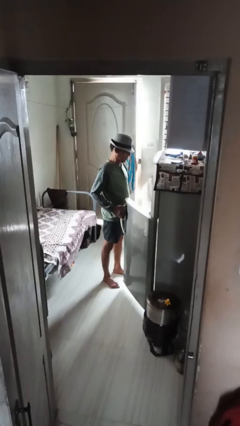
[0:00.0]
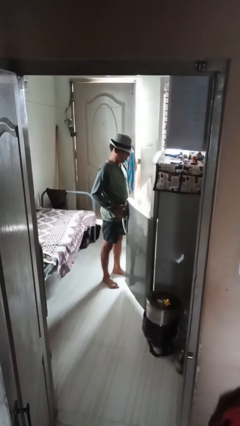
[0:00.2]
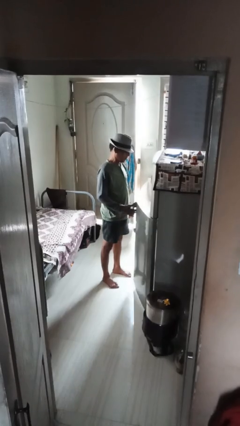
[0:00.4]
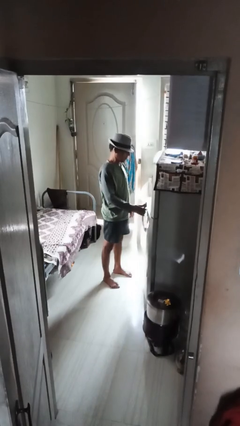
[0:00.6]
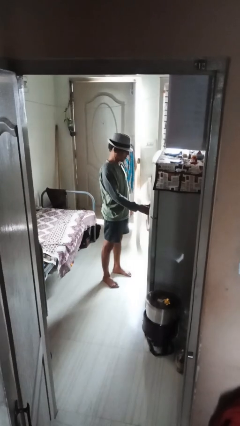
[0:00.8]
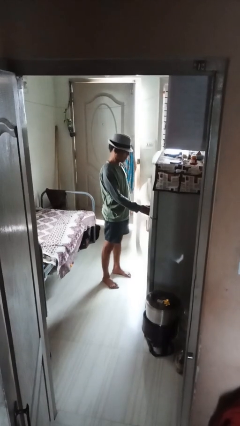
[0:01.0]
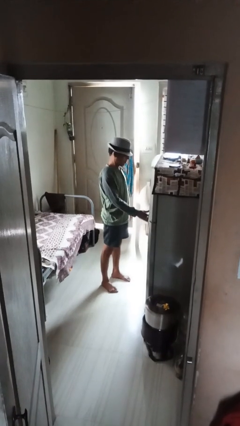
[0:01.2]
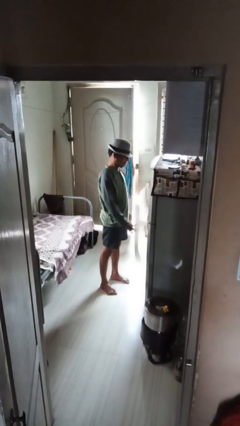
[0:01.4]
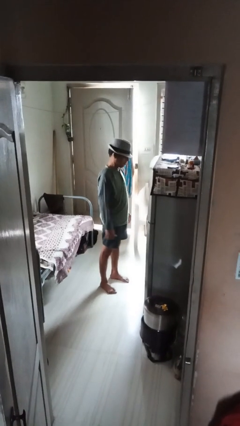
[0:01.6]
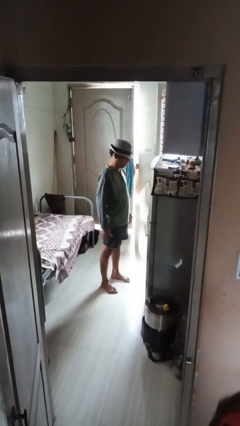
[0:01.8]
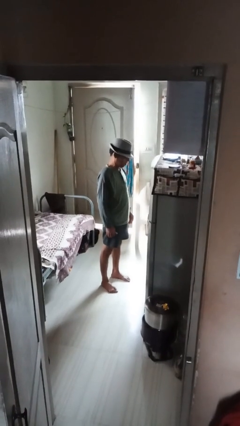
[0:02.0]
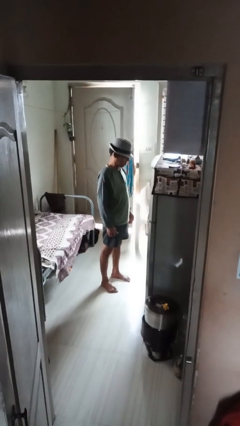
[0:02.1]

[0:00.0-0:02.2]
person closes refrigerator

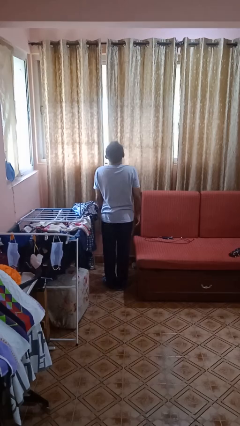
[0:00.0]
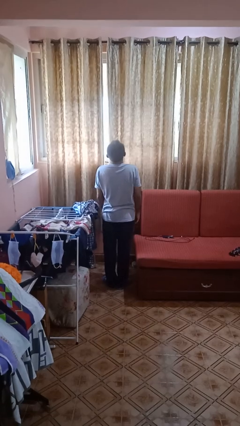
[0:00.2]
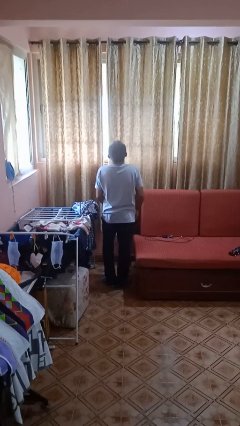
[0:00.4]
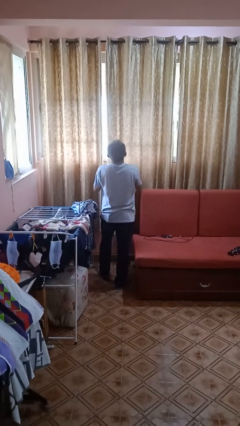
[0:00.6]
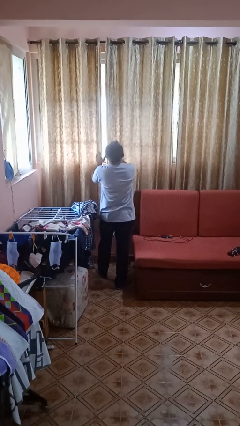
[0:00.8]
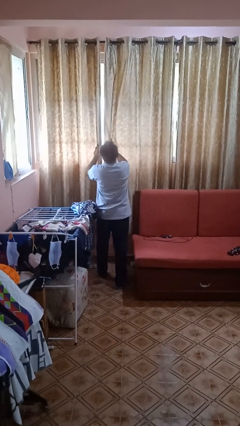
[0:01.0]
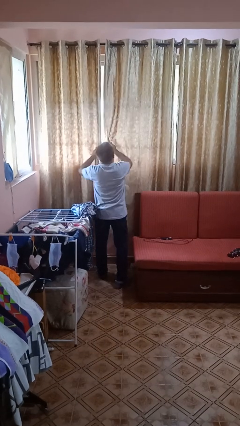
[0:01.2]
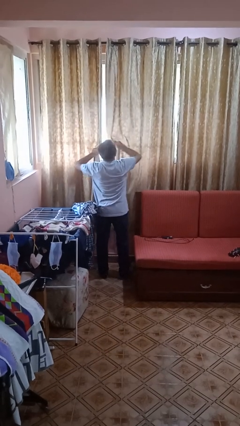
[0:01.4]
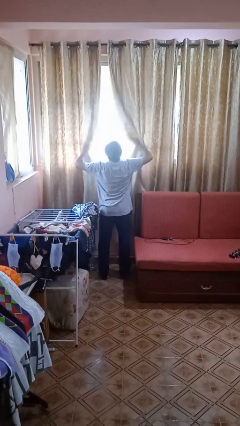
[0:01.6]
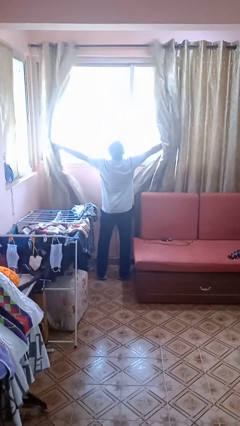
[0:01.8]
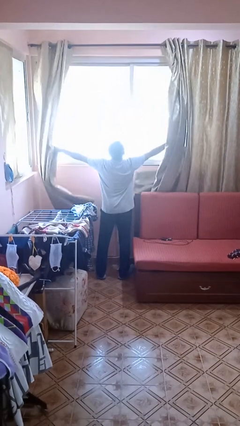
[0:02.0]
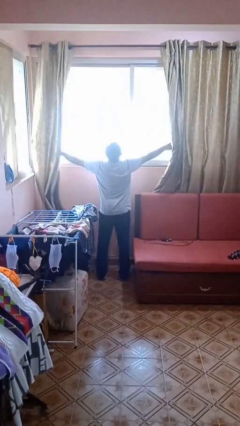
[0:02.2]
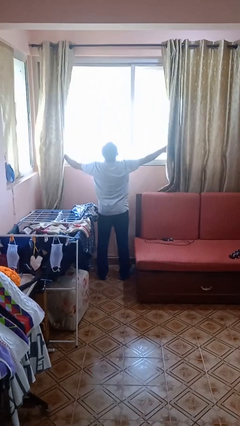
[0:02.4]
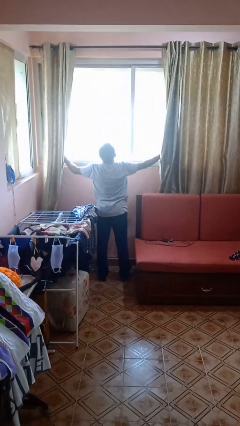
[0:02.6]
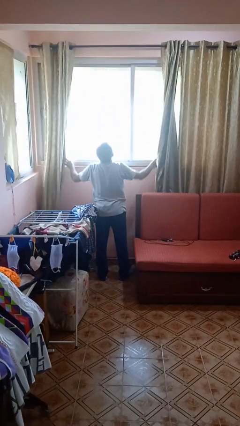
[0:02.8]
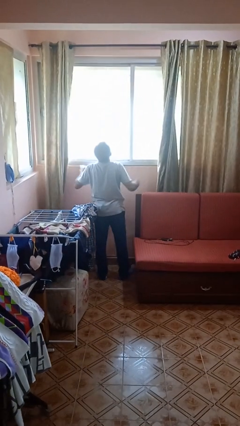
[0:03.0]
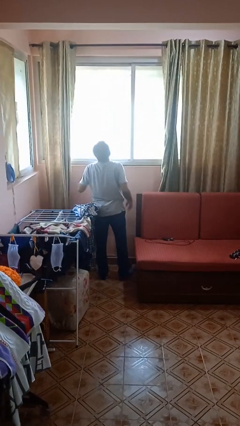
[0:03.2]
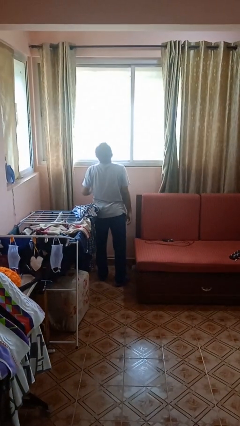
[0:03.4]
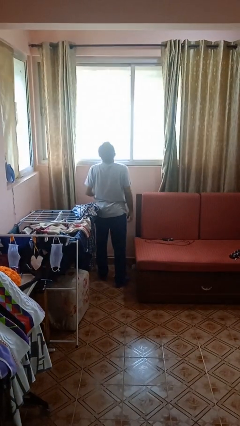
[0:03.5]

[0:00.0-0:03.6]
person opens curtains

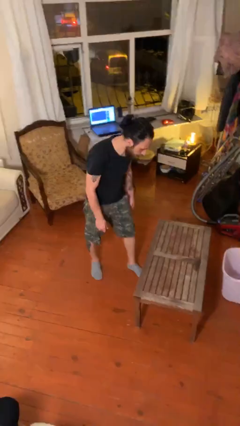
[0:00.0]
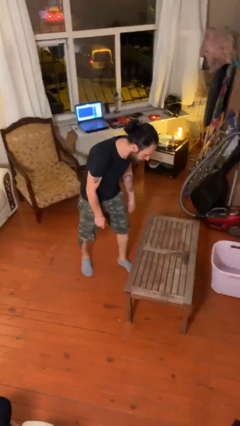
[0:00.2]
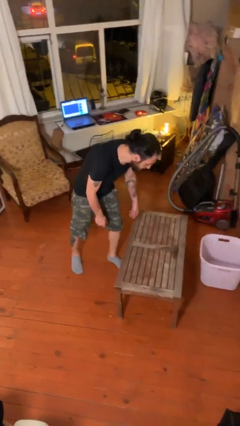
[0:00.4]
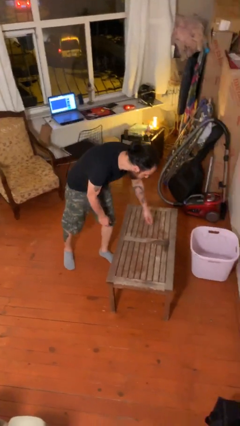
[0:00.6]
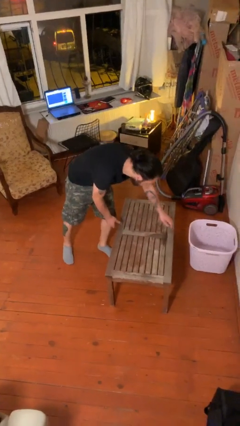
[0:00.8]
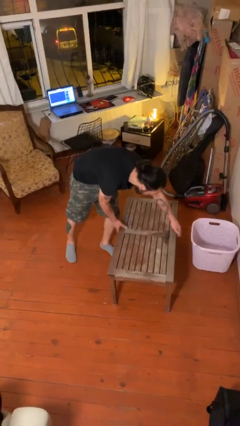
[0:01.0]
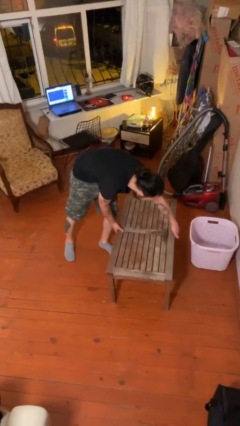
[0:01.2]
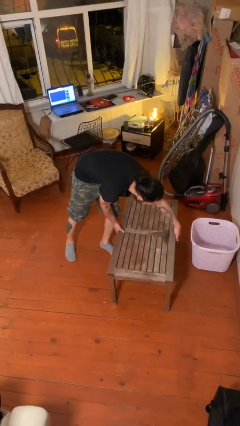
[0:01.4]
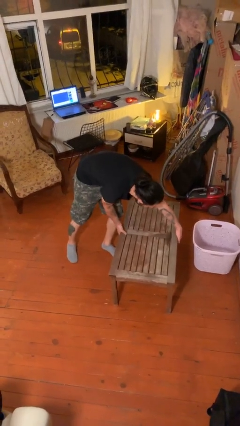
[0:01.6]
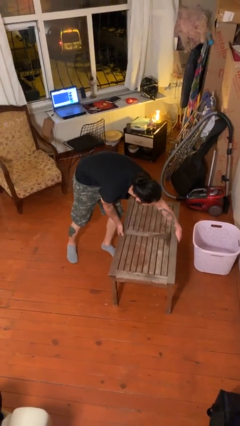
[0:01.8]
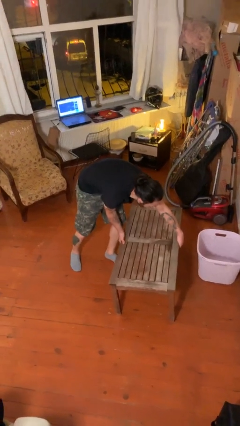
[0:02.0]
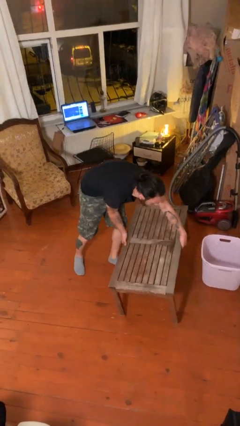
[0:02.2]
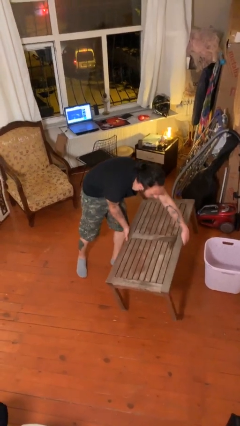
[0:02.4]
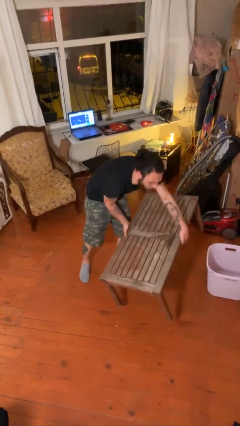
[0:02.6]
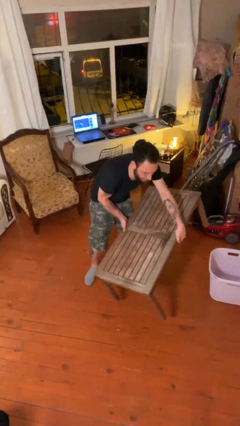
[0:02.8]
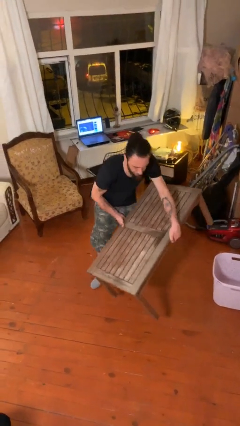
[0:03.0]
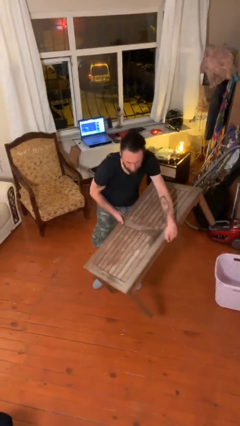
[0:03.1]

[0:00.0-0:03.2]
person picks up object from floor

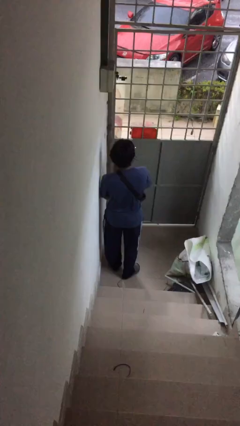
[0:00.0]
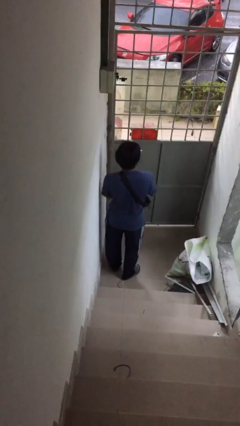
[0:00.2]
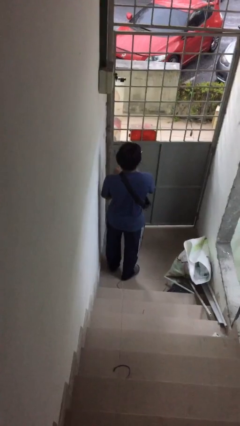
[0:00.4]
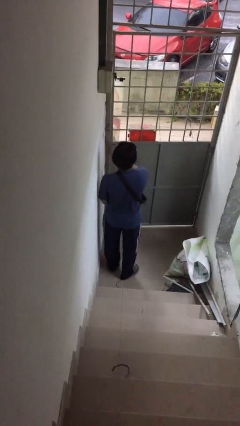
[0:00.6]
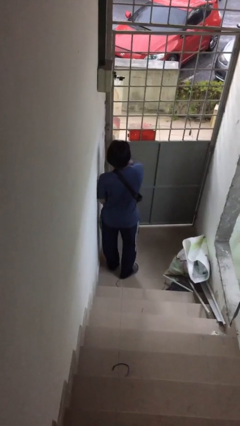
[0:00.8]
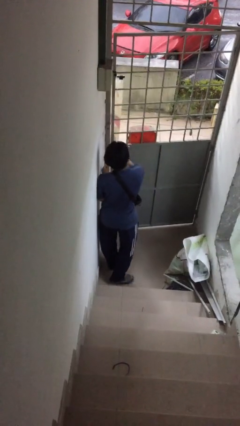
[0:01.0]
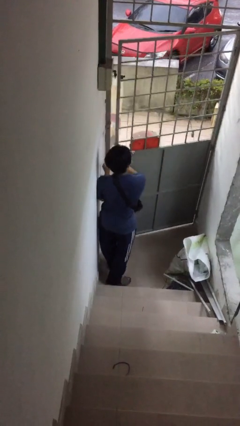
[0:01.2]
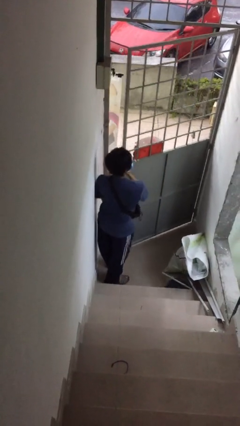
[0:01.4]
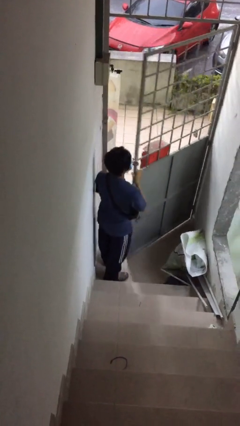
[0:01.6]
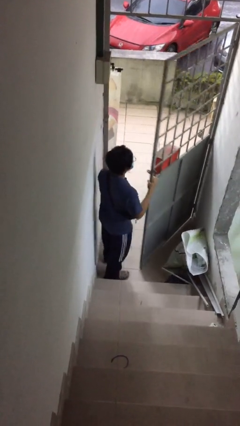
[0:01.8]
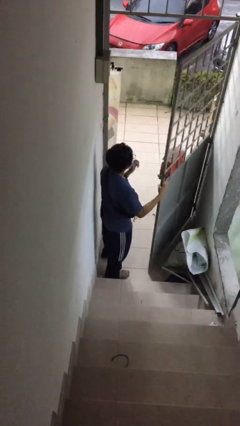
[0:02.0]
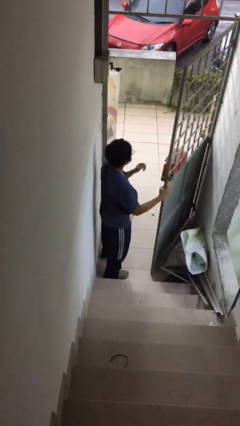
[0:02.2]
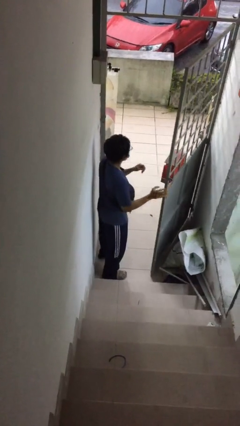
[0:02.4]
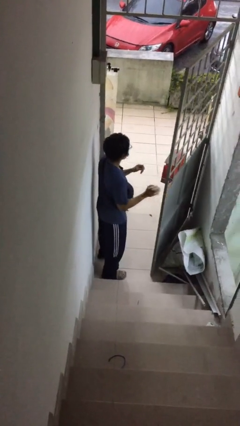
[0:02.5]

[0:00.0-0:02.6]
person opens facility door

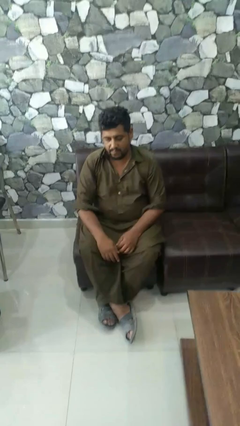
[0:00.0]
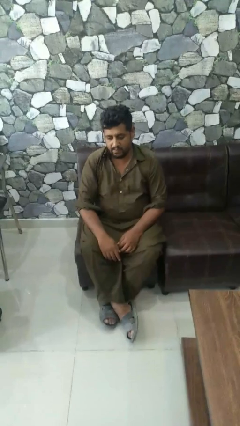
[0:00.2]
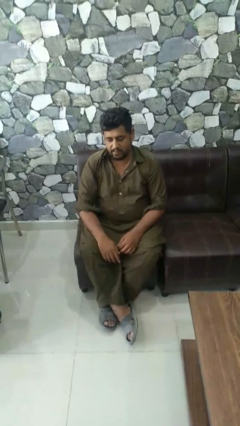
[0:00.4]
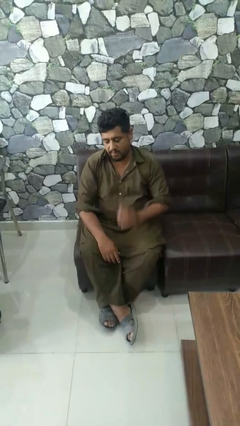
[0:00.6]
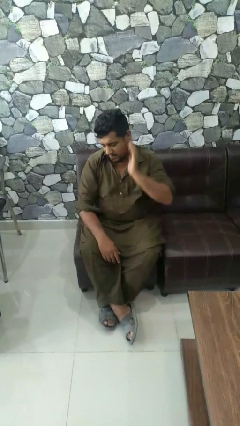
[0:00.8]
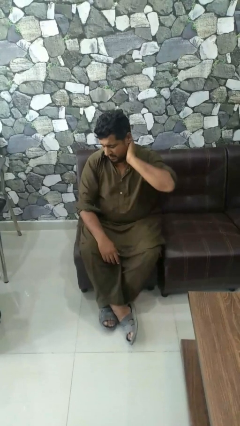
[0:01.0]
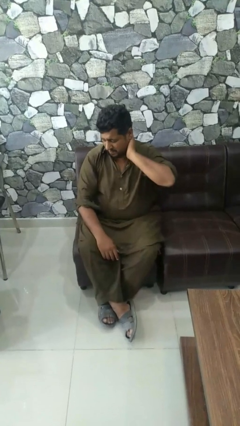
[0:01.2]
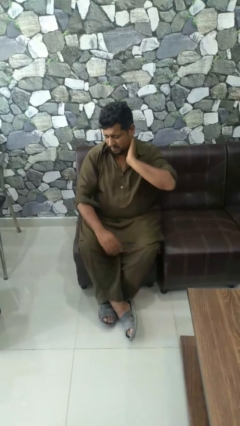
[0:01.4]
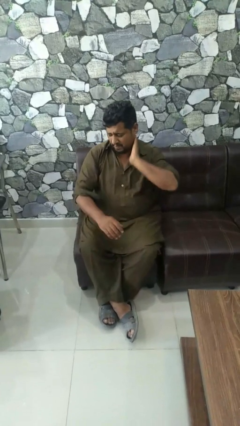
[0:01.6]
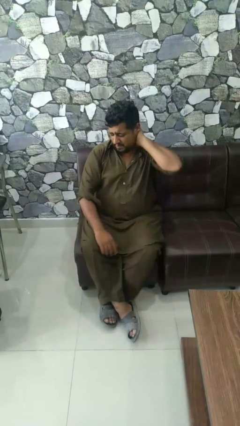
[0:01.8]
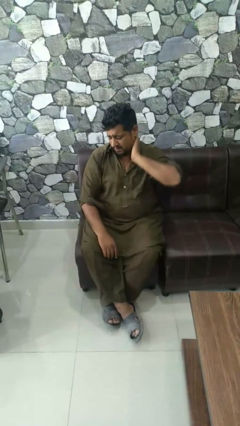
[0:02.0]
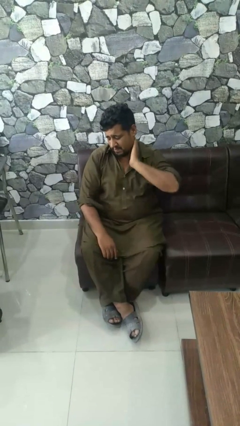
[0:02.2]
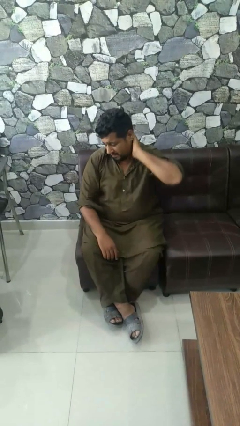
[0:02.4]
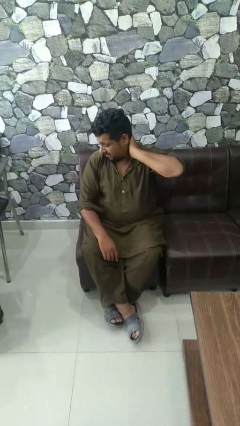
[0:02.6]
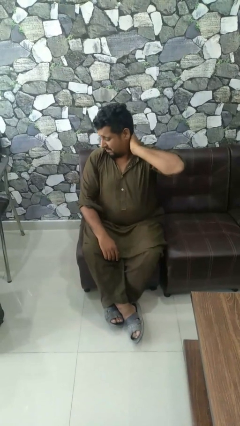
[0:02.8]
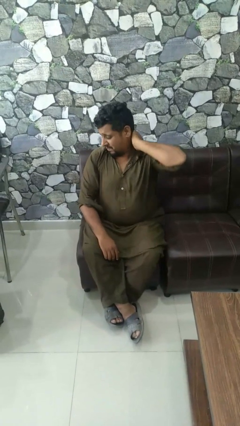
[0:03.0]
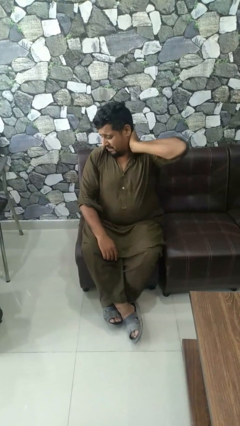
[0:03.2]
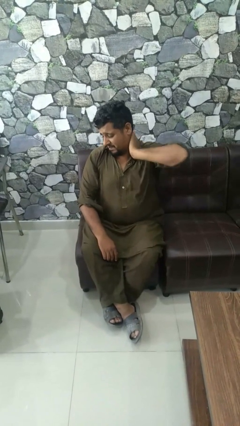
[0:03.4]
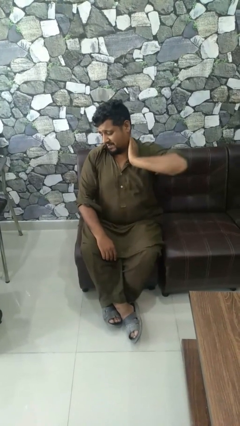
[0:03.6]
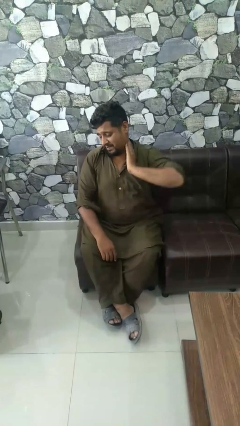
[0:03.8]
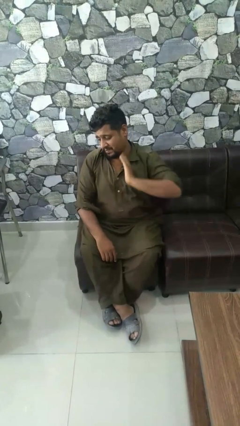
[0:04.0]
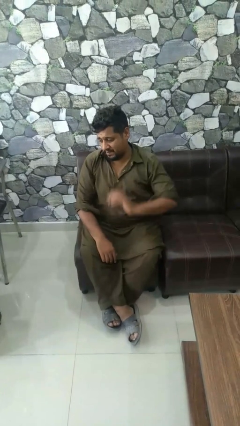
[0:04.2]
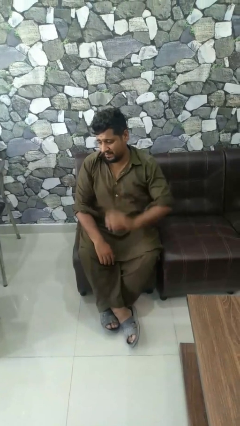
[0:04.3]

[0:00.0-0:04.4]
person rubs neck

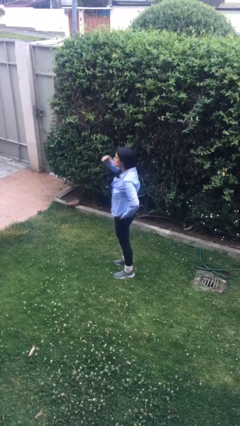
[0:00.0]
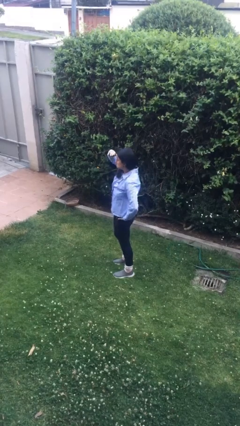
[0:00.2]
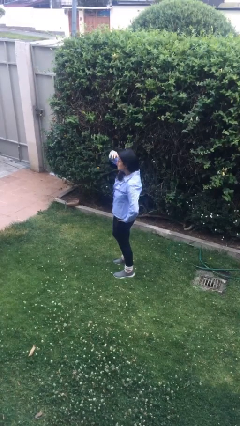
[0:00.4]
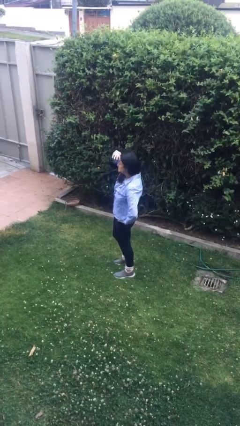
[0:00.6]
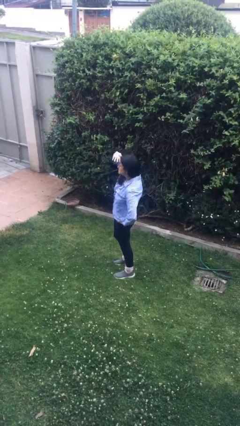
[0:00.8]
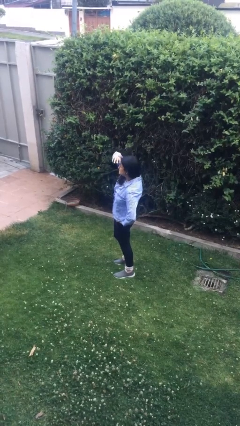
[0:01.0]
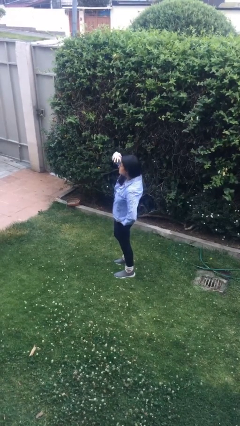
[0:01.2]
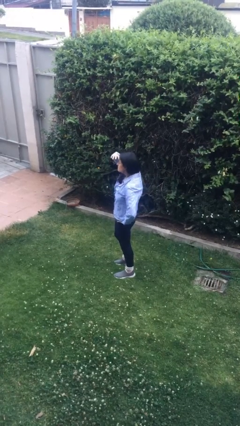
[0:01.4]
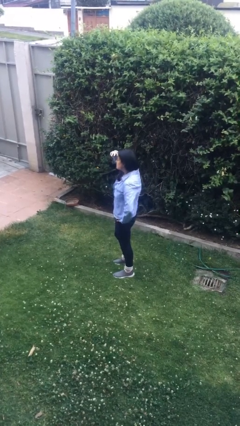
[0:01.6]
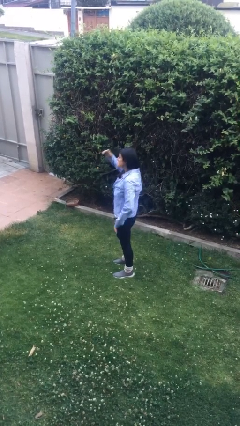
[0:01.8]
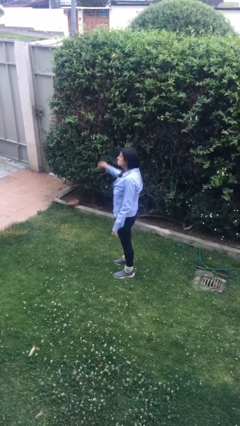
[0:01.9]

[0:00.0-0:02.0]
person shades eyes
